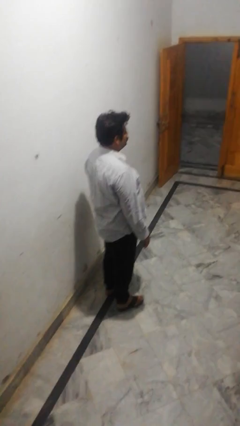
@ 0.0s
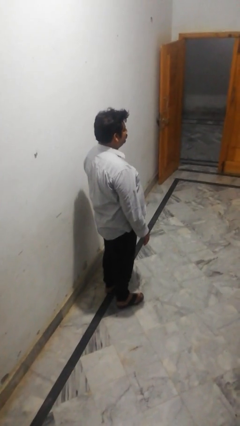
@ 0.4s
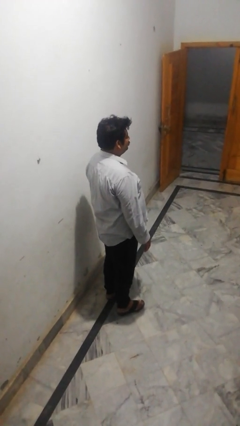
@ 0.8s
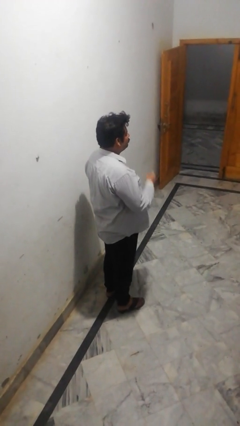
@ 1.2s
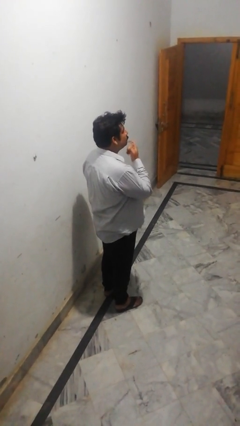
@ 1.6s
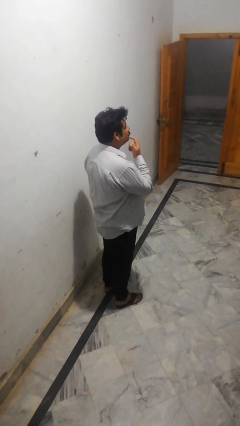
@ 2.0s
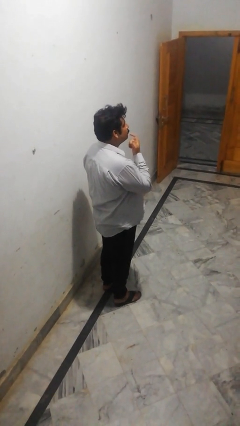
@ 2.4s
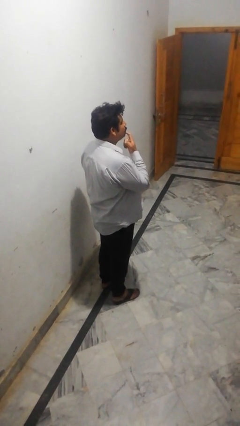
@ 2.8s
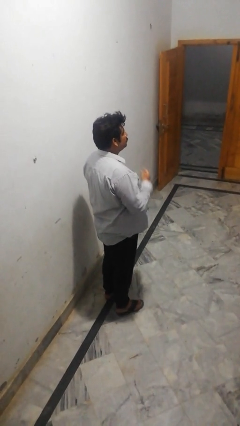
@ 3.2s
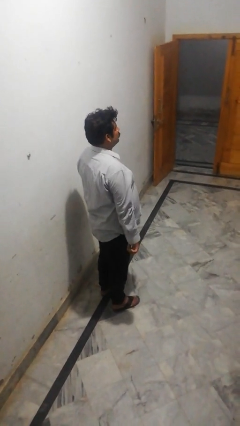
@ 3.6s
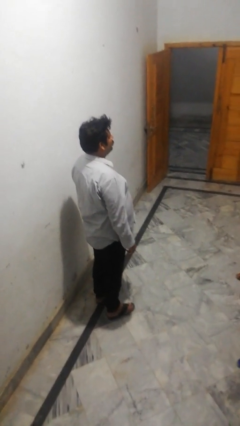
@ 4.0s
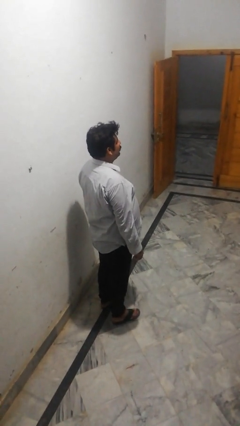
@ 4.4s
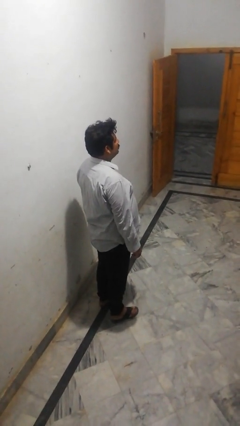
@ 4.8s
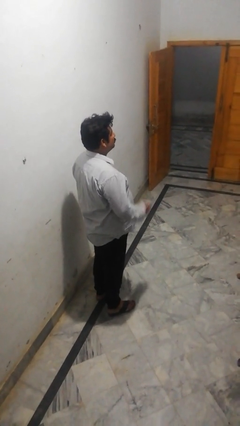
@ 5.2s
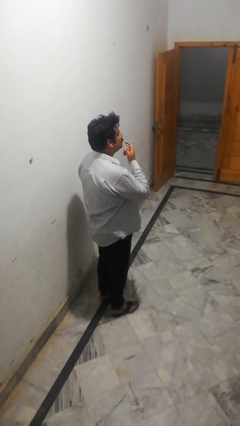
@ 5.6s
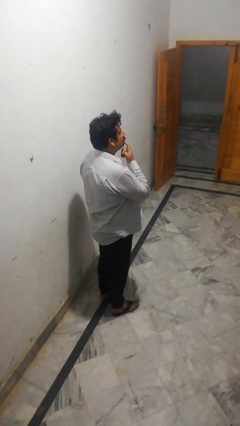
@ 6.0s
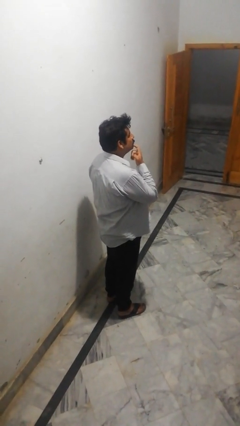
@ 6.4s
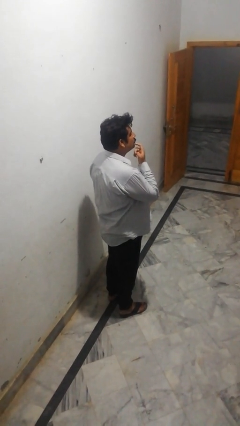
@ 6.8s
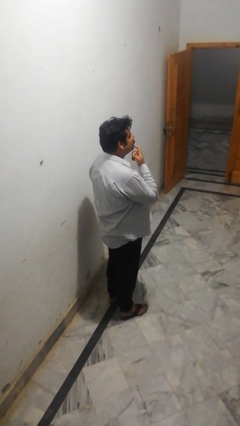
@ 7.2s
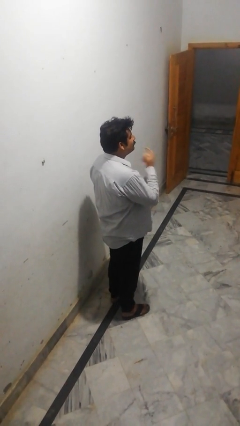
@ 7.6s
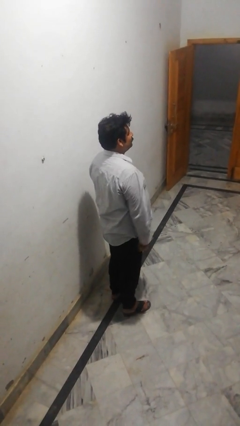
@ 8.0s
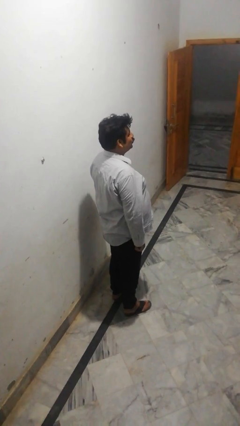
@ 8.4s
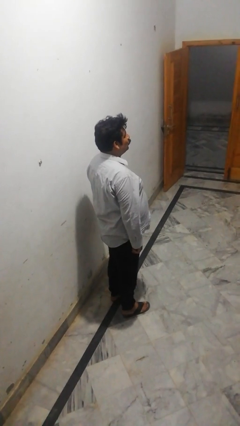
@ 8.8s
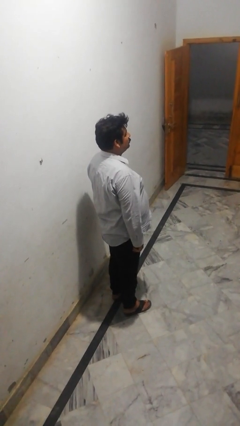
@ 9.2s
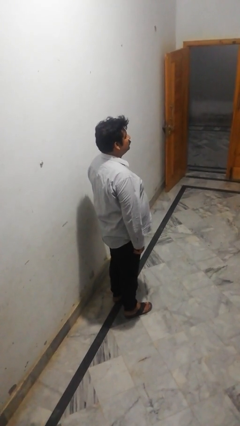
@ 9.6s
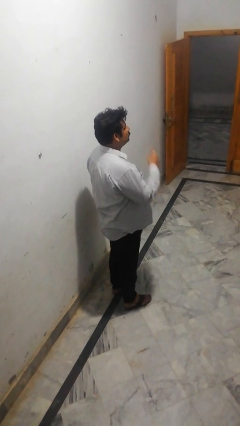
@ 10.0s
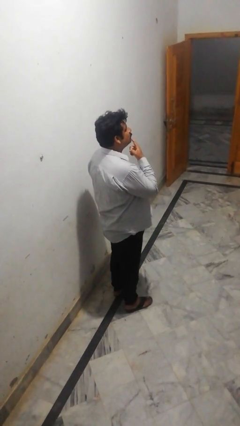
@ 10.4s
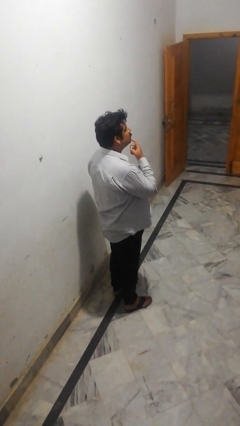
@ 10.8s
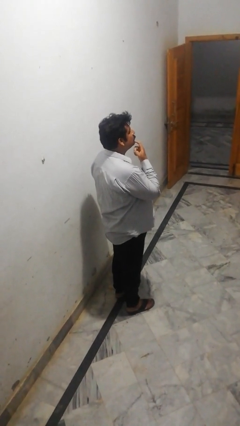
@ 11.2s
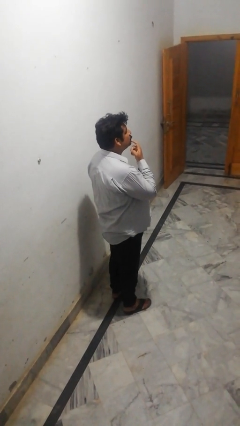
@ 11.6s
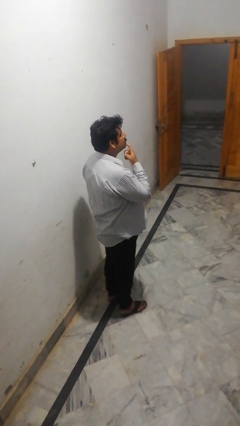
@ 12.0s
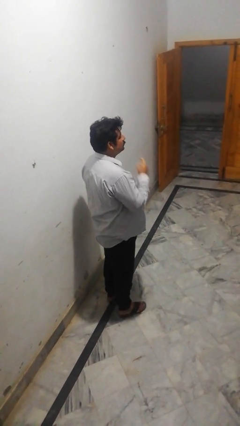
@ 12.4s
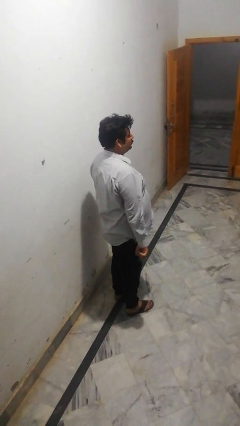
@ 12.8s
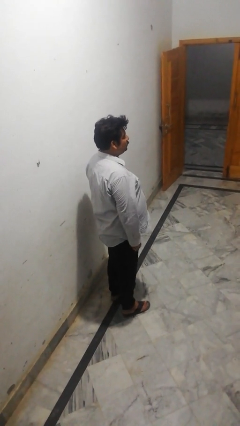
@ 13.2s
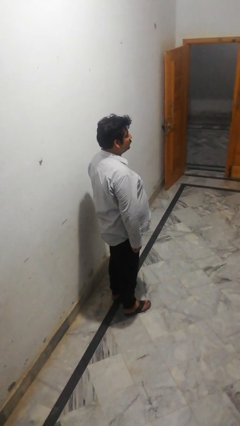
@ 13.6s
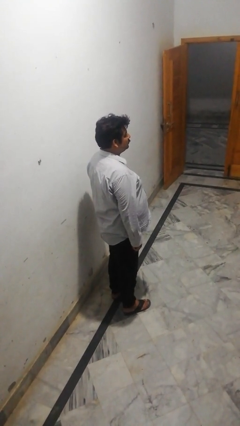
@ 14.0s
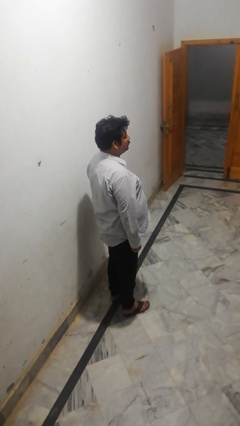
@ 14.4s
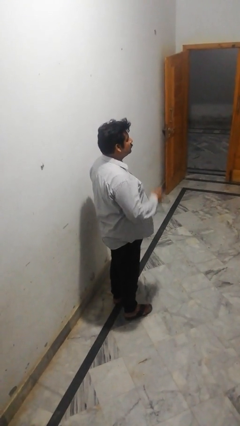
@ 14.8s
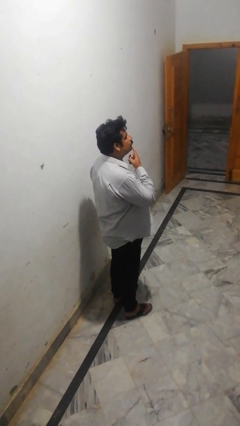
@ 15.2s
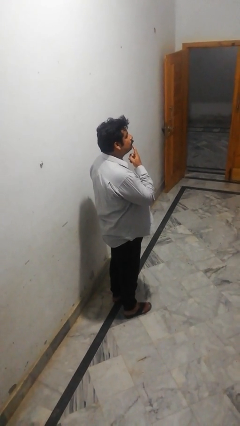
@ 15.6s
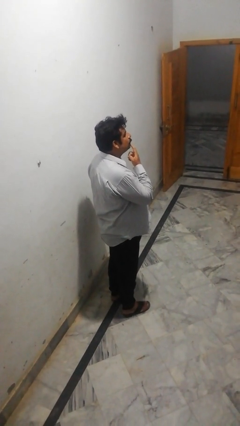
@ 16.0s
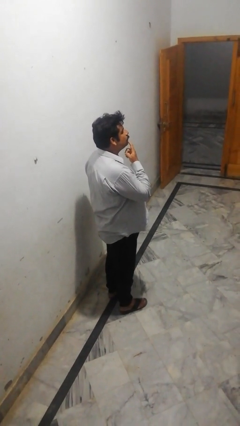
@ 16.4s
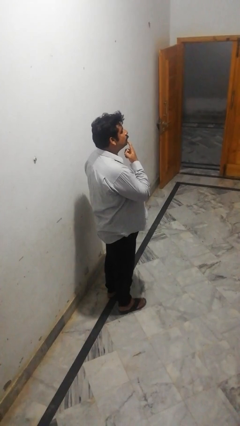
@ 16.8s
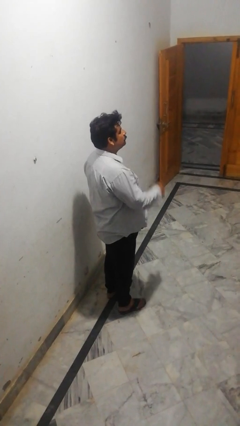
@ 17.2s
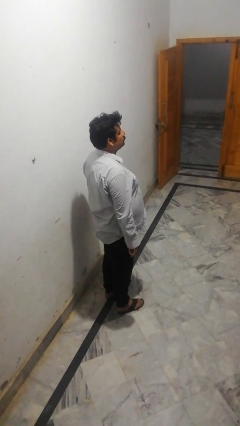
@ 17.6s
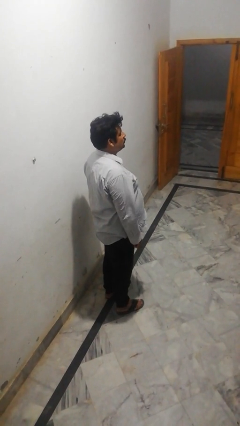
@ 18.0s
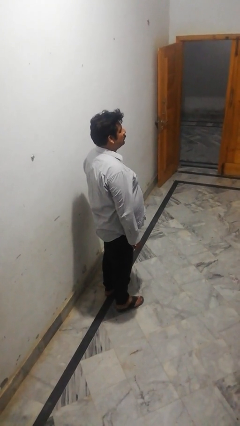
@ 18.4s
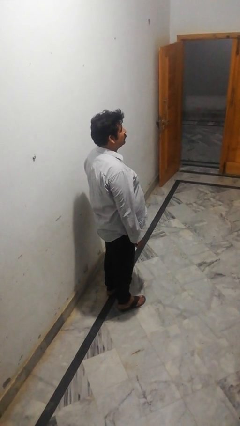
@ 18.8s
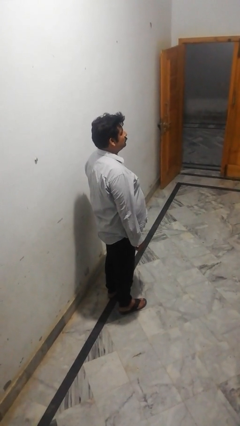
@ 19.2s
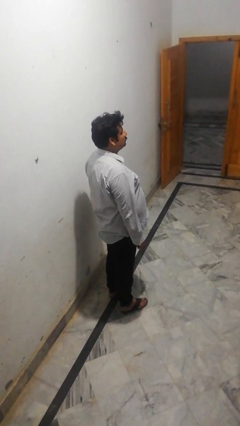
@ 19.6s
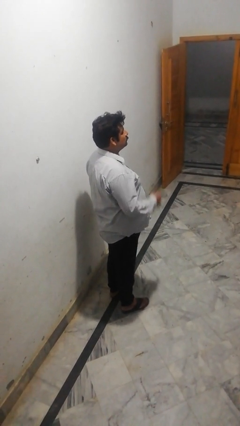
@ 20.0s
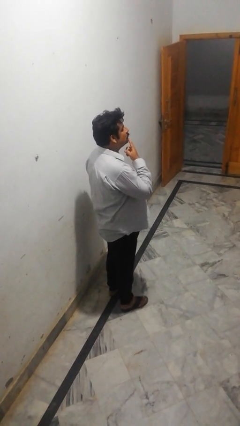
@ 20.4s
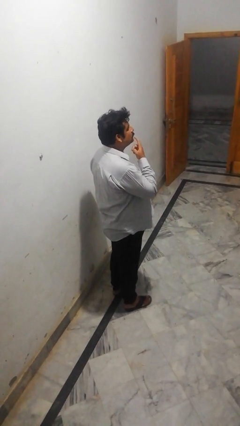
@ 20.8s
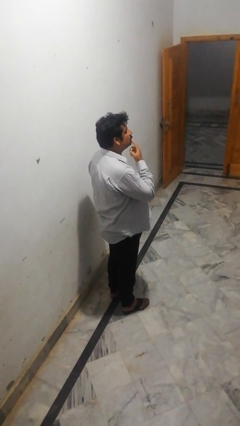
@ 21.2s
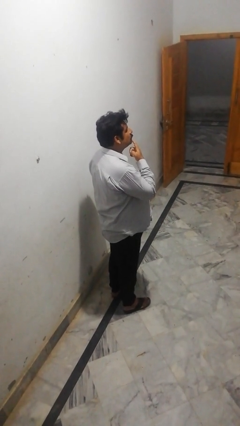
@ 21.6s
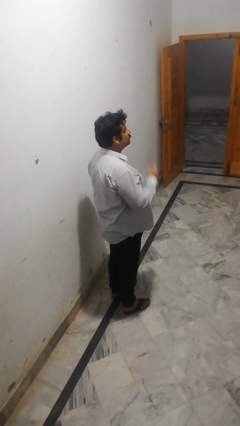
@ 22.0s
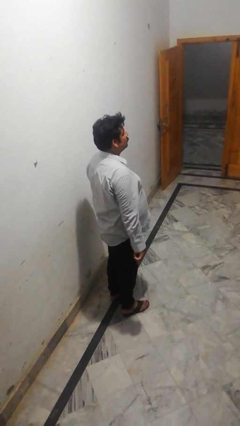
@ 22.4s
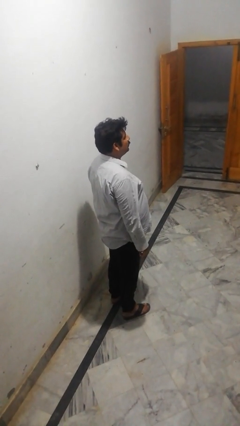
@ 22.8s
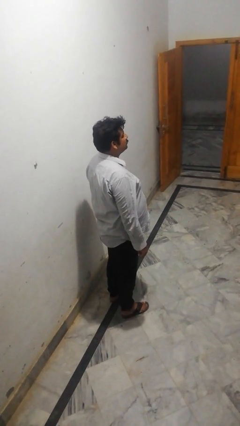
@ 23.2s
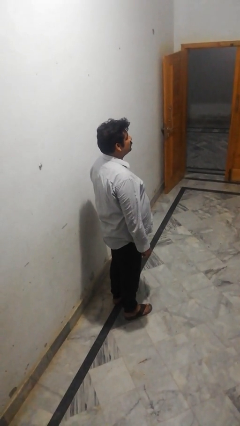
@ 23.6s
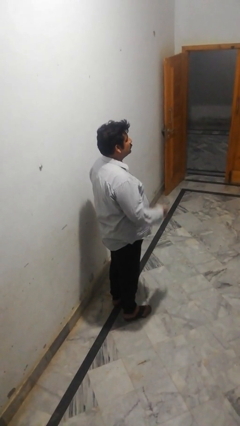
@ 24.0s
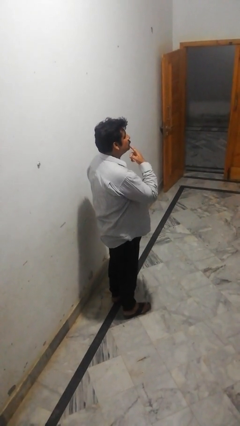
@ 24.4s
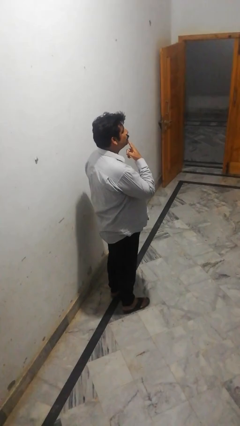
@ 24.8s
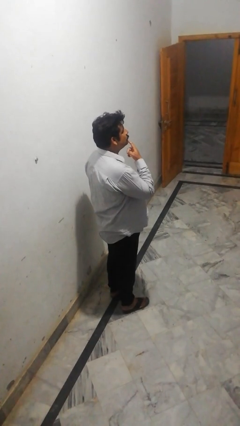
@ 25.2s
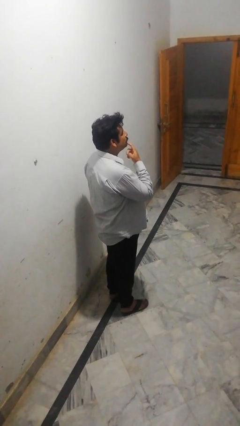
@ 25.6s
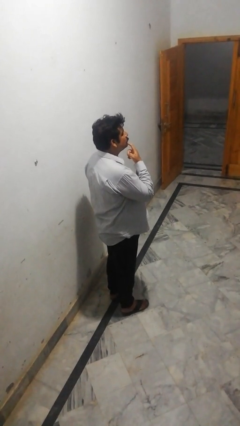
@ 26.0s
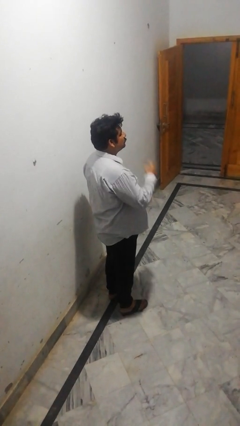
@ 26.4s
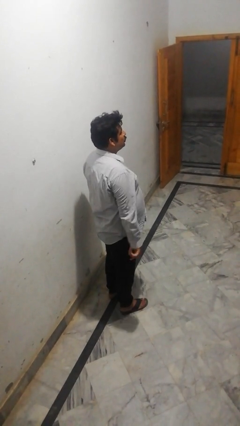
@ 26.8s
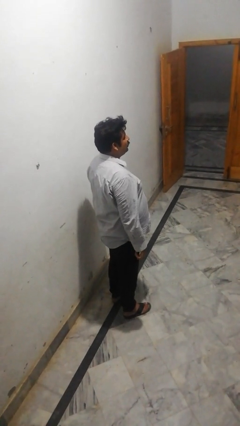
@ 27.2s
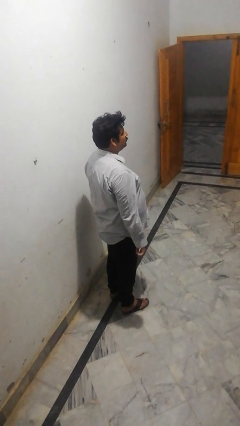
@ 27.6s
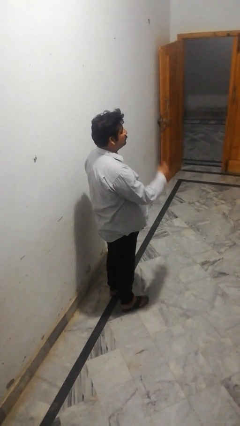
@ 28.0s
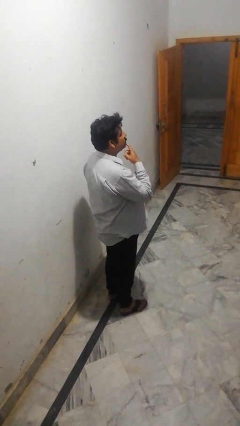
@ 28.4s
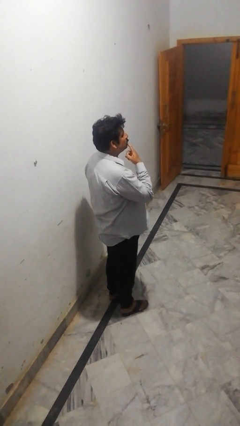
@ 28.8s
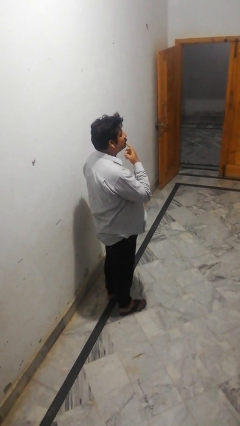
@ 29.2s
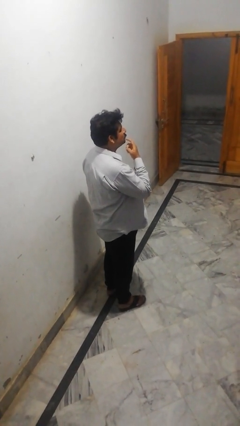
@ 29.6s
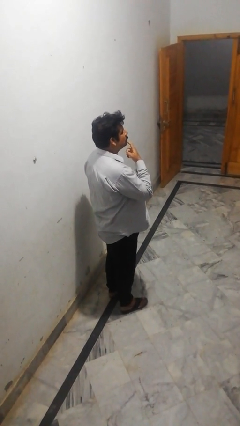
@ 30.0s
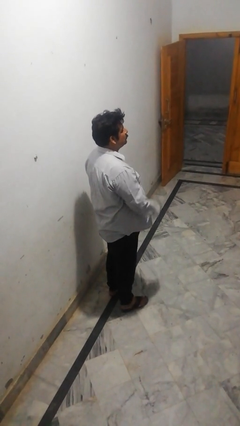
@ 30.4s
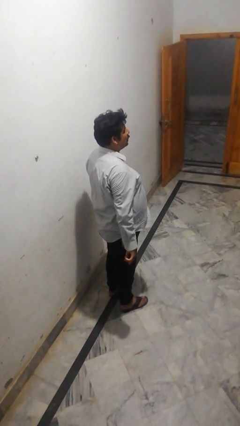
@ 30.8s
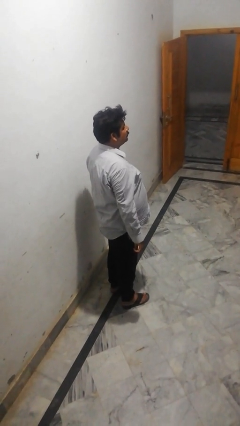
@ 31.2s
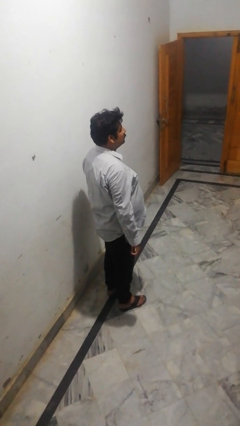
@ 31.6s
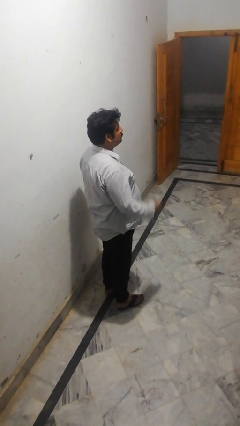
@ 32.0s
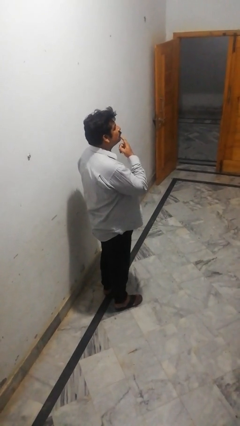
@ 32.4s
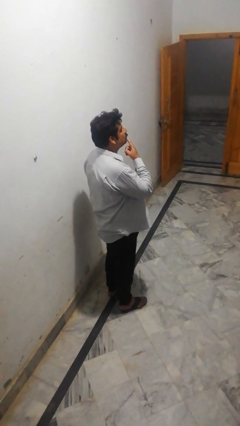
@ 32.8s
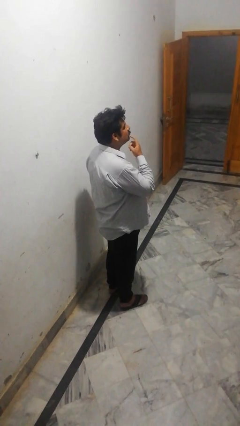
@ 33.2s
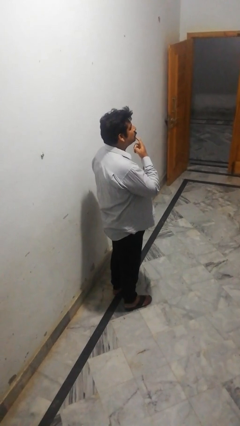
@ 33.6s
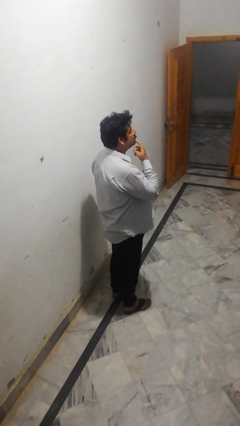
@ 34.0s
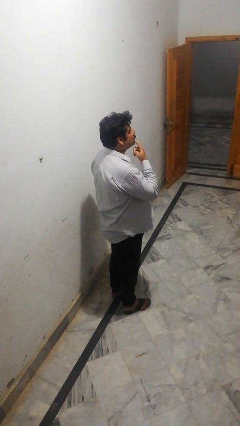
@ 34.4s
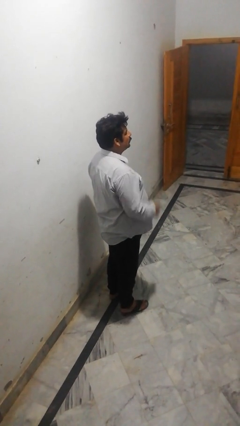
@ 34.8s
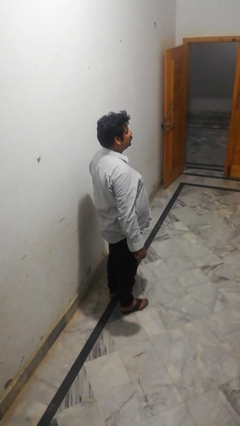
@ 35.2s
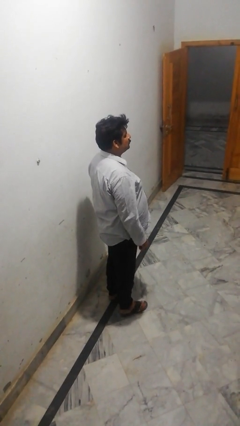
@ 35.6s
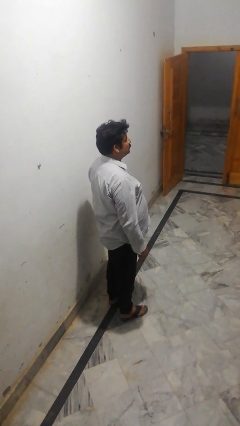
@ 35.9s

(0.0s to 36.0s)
person strokes chin

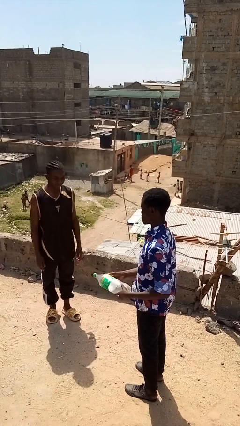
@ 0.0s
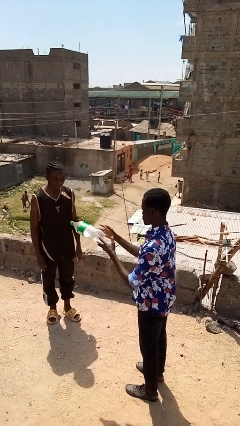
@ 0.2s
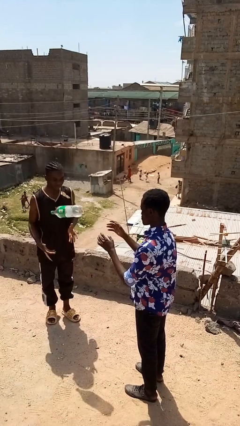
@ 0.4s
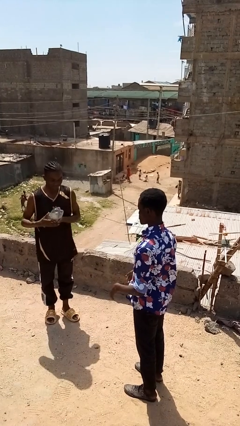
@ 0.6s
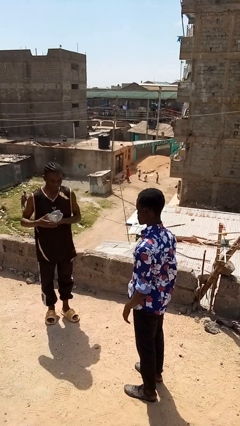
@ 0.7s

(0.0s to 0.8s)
person throws object to person
